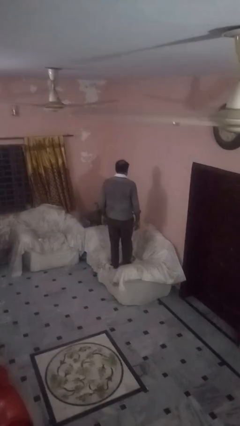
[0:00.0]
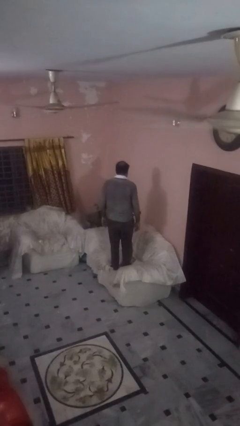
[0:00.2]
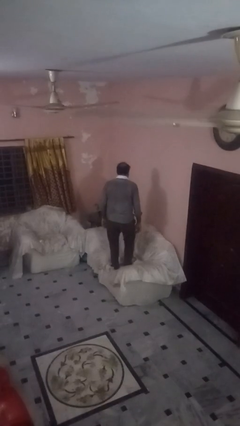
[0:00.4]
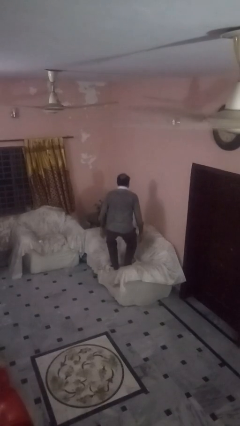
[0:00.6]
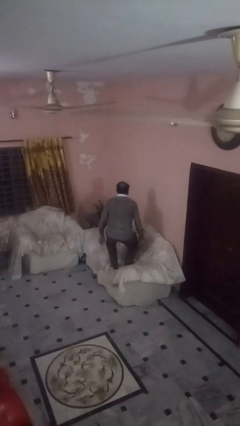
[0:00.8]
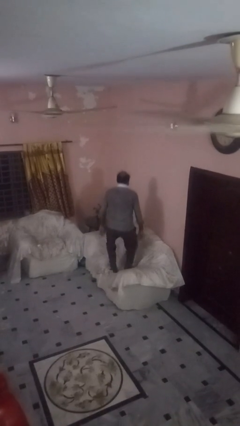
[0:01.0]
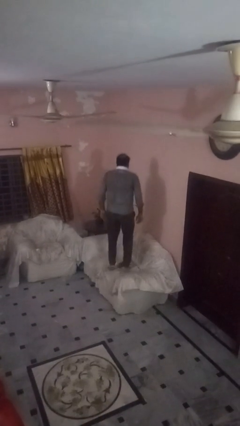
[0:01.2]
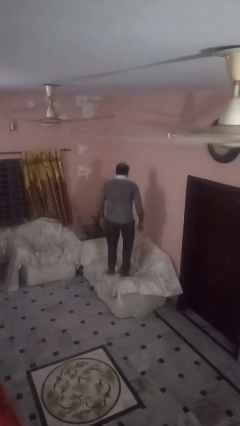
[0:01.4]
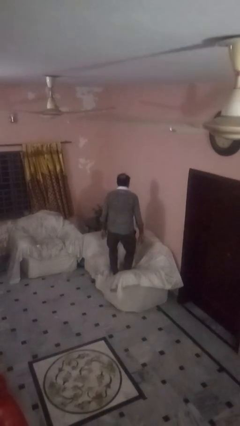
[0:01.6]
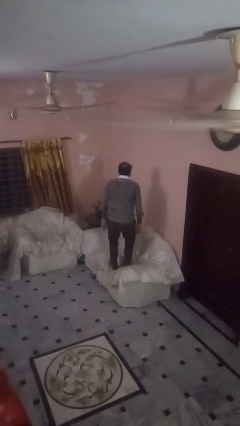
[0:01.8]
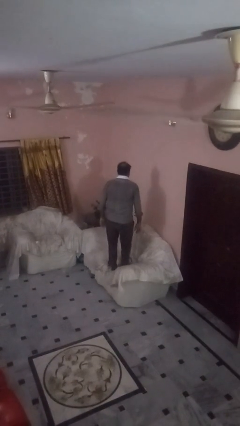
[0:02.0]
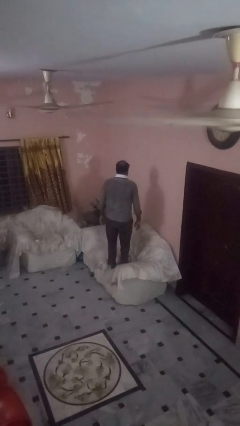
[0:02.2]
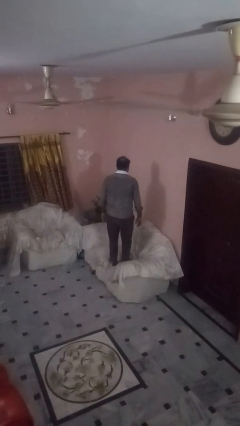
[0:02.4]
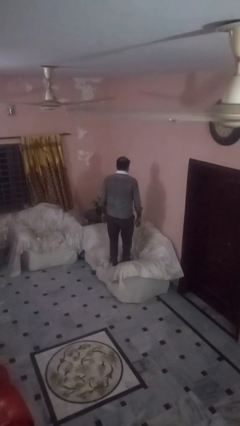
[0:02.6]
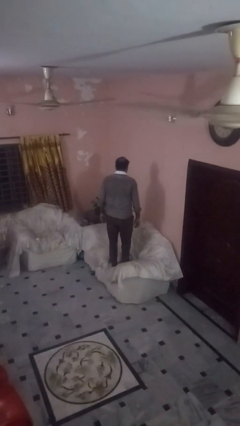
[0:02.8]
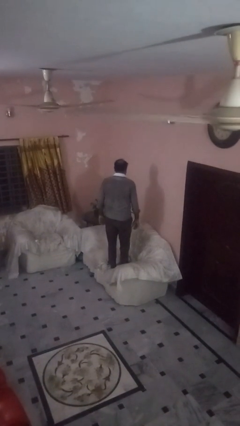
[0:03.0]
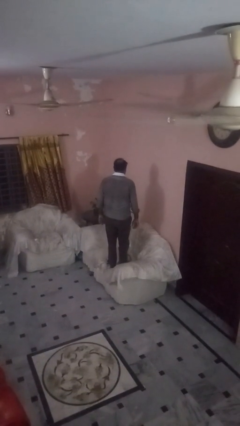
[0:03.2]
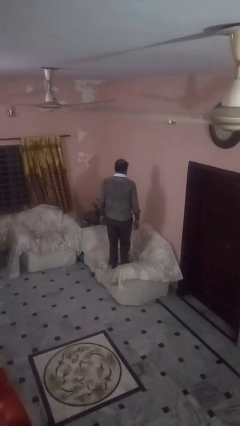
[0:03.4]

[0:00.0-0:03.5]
person jumps on couch

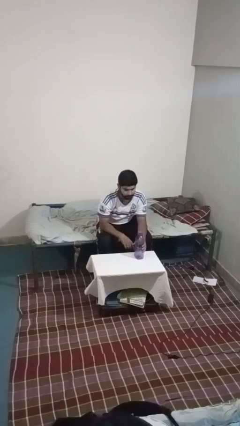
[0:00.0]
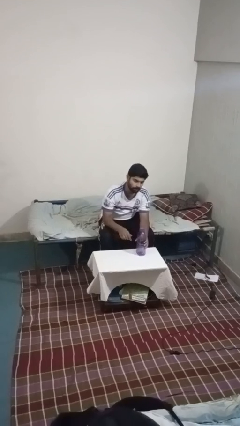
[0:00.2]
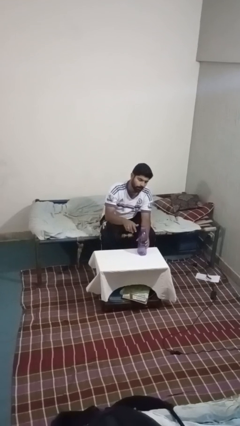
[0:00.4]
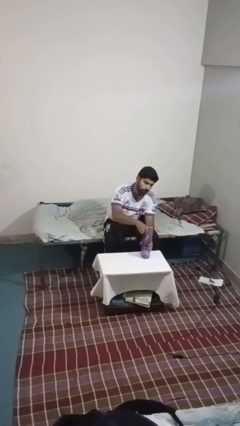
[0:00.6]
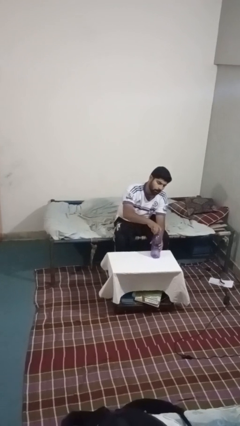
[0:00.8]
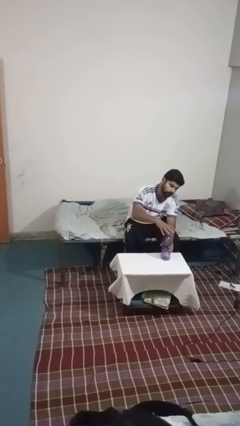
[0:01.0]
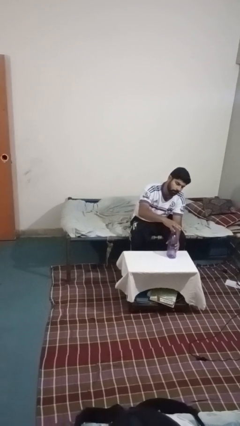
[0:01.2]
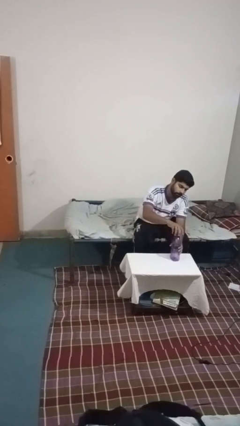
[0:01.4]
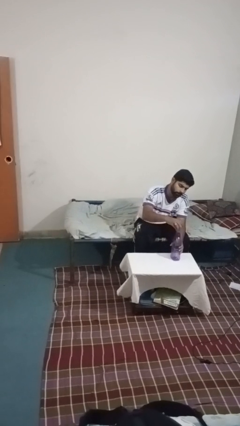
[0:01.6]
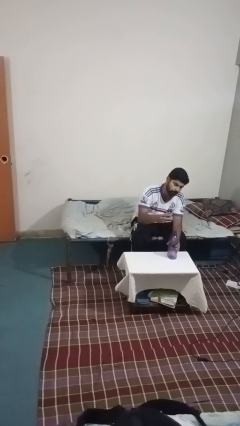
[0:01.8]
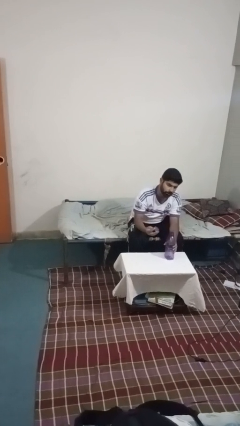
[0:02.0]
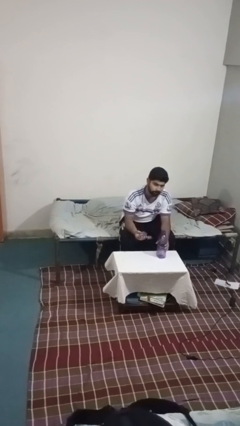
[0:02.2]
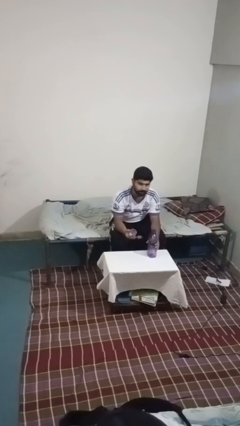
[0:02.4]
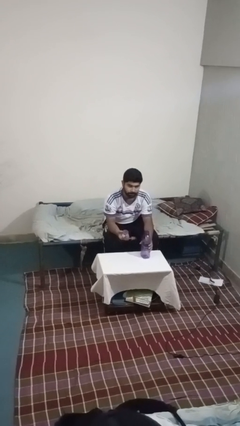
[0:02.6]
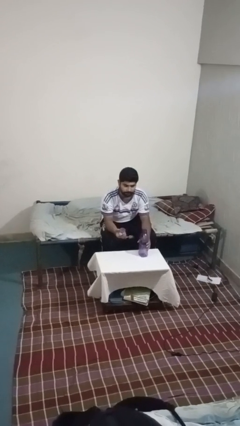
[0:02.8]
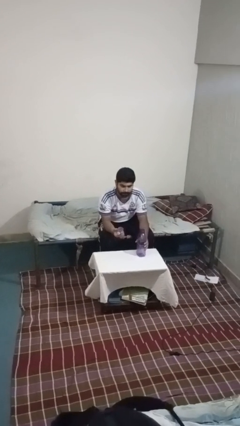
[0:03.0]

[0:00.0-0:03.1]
person unscrews lid from bottle

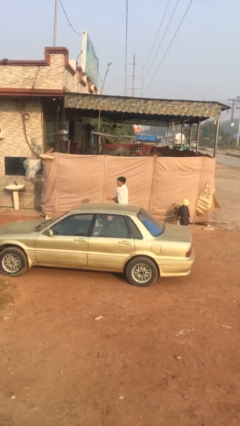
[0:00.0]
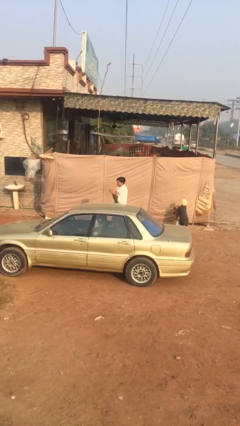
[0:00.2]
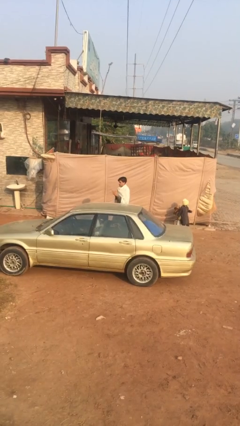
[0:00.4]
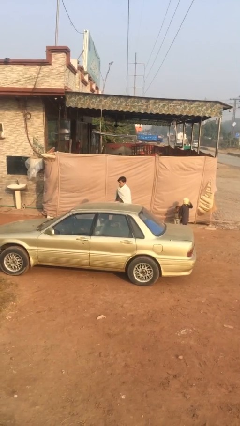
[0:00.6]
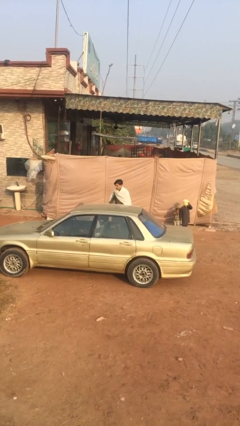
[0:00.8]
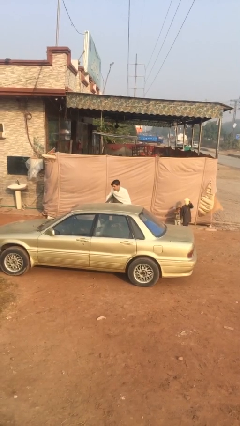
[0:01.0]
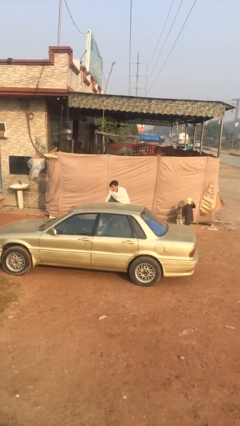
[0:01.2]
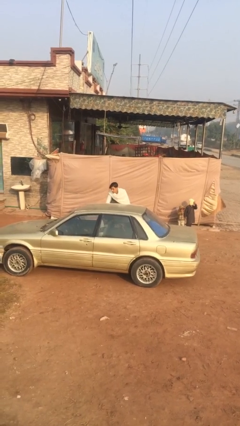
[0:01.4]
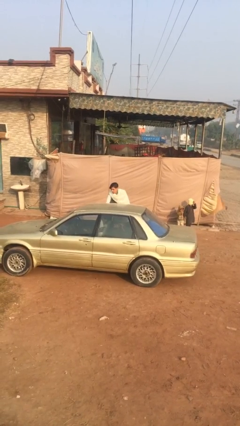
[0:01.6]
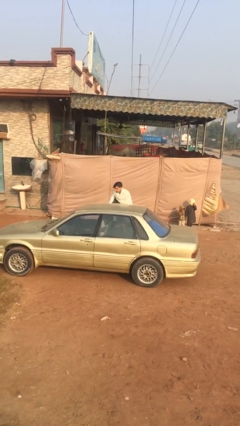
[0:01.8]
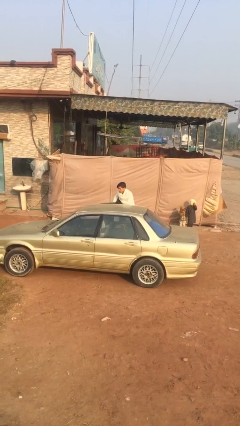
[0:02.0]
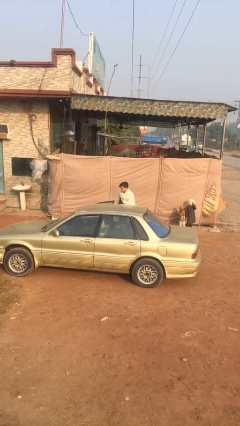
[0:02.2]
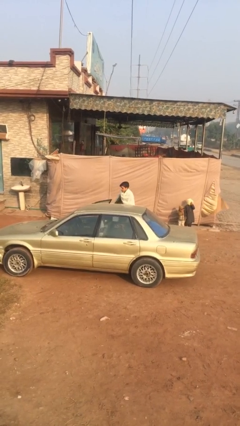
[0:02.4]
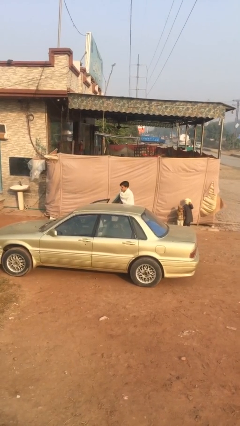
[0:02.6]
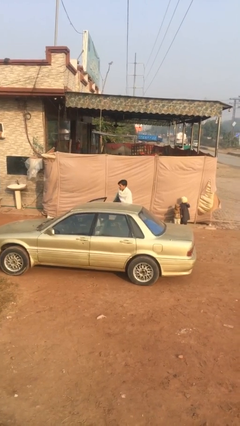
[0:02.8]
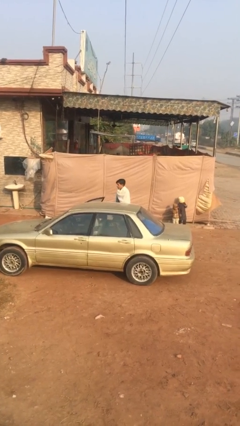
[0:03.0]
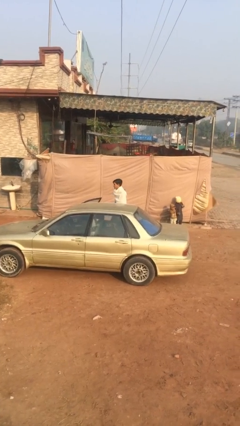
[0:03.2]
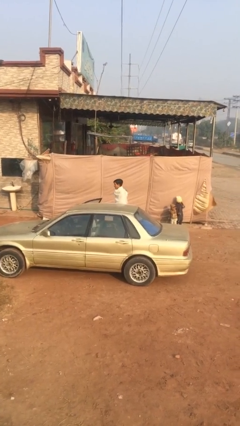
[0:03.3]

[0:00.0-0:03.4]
person opens car door

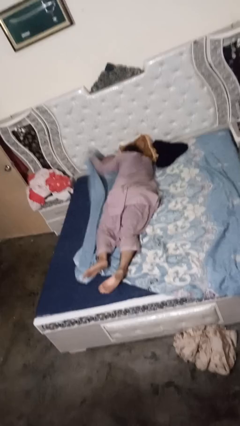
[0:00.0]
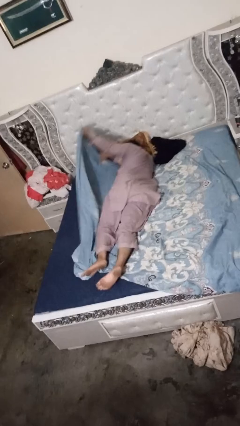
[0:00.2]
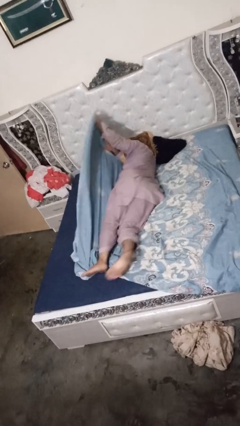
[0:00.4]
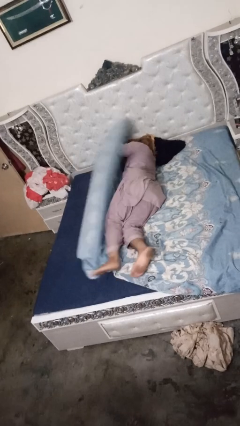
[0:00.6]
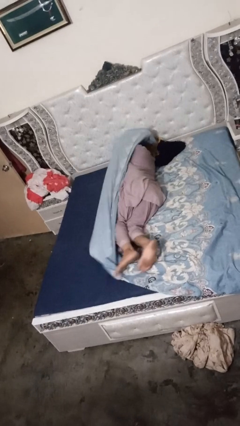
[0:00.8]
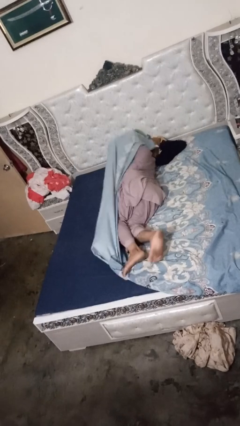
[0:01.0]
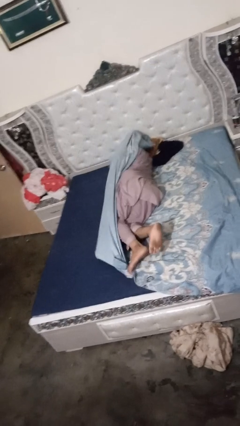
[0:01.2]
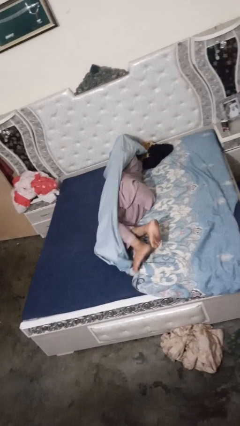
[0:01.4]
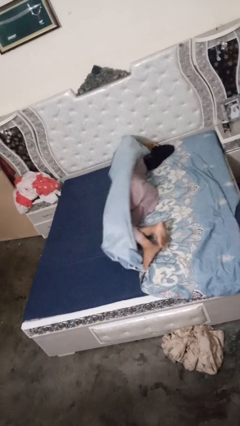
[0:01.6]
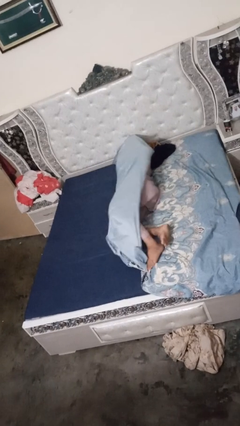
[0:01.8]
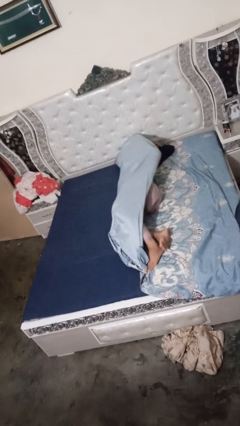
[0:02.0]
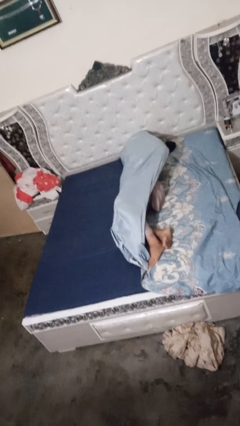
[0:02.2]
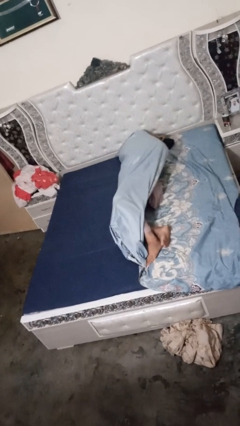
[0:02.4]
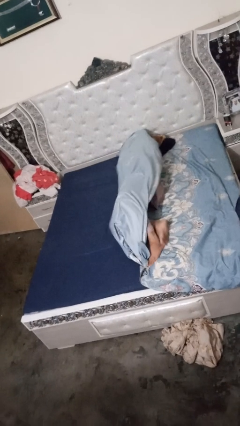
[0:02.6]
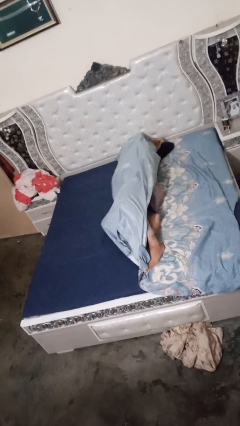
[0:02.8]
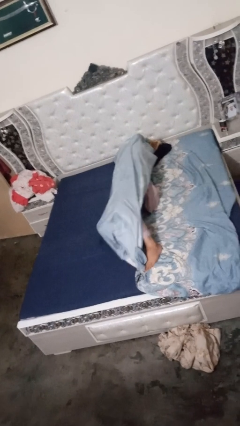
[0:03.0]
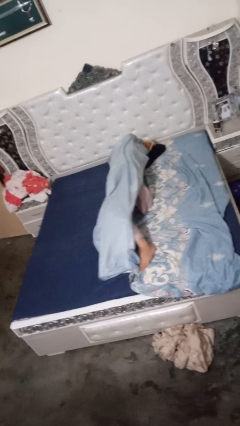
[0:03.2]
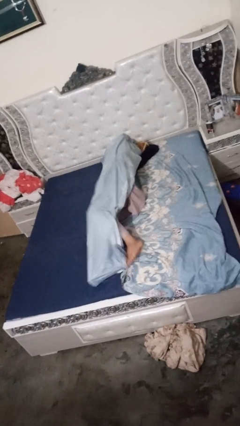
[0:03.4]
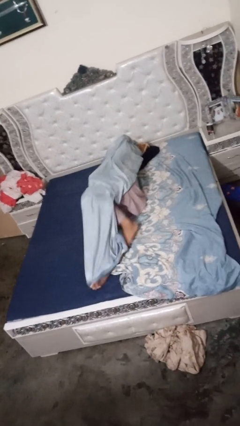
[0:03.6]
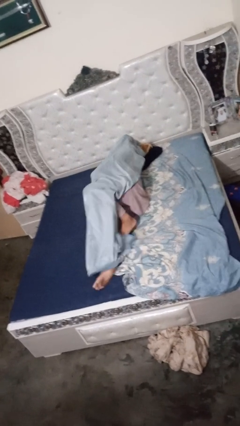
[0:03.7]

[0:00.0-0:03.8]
person covers with bedsheets

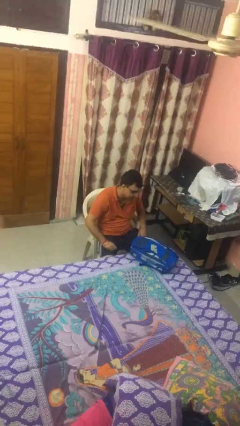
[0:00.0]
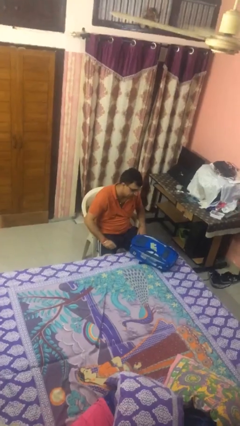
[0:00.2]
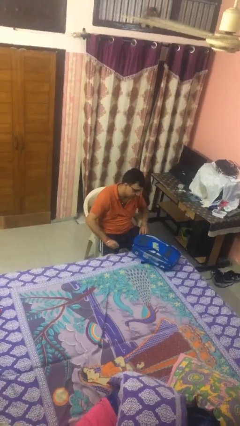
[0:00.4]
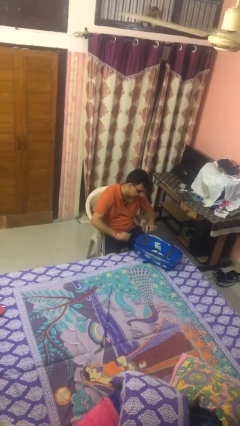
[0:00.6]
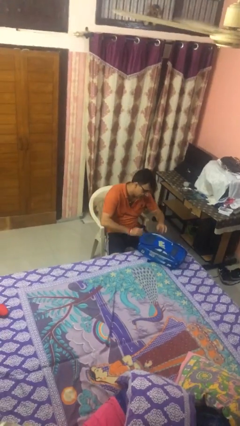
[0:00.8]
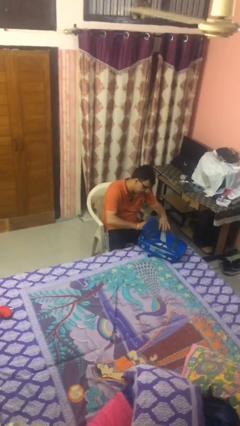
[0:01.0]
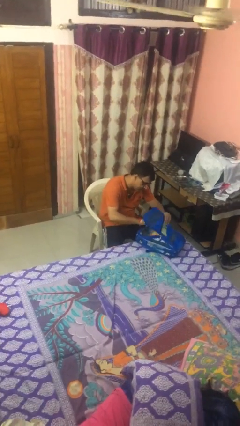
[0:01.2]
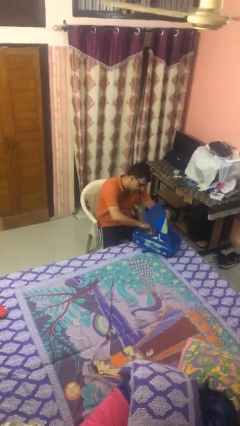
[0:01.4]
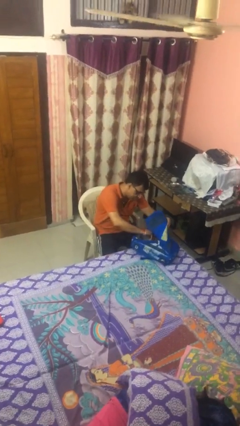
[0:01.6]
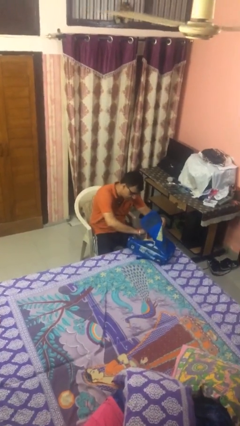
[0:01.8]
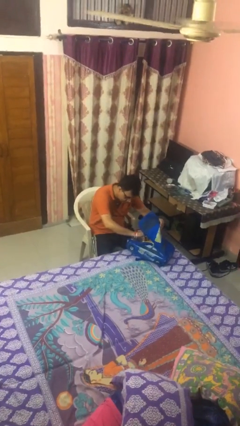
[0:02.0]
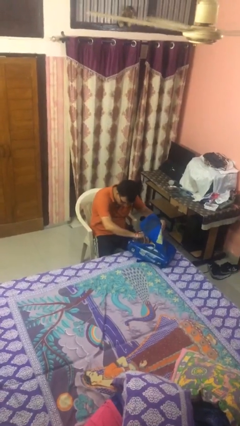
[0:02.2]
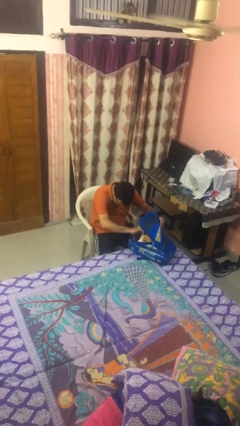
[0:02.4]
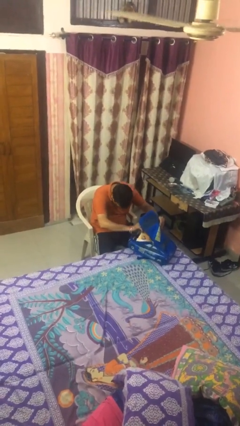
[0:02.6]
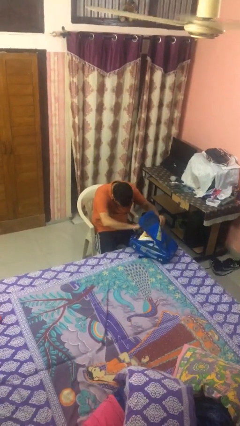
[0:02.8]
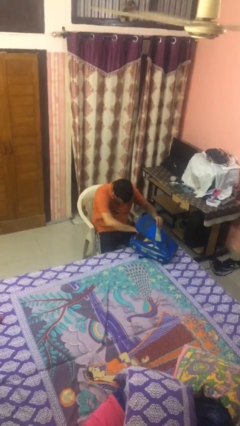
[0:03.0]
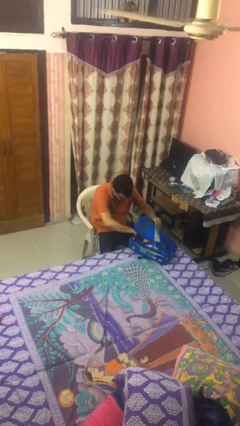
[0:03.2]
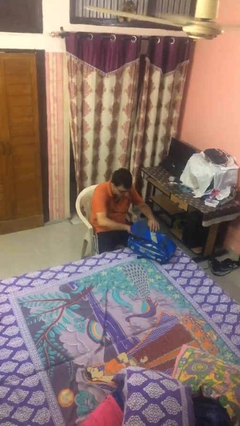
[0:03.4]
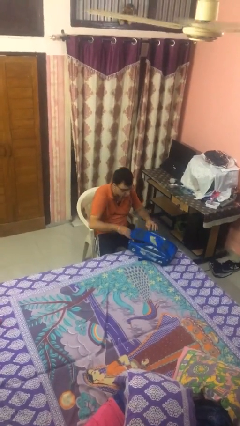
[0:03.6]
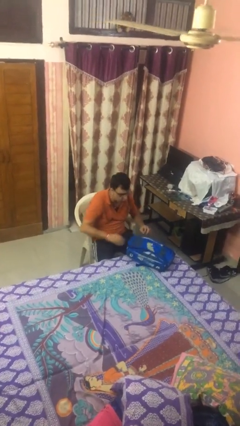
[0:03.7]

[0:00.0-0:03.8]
person searches in bag

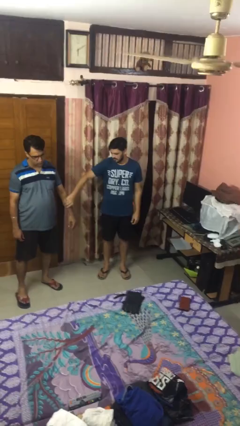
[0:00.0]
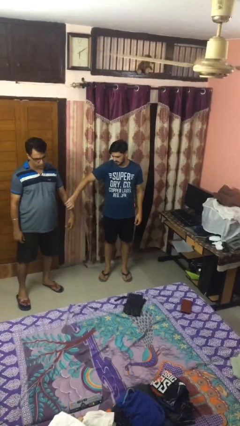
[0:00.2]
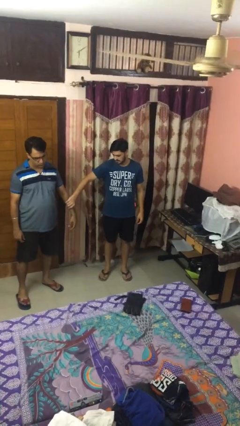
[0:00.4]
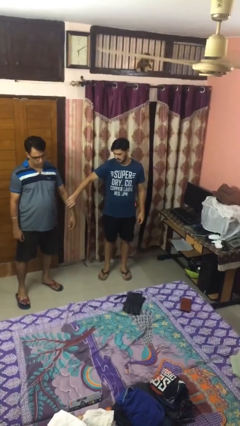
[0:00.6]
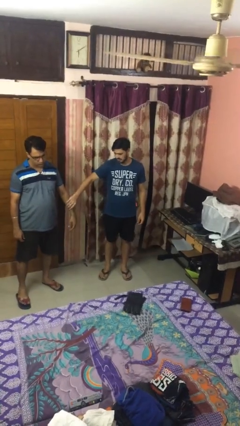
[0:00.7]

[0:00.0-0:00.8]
person grabs person by forearm
